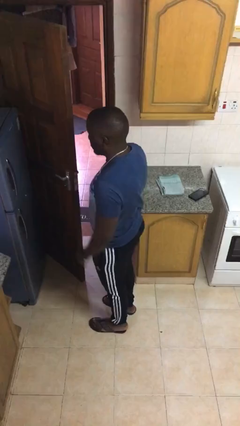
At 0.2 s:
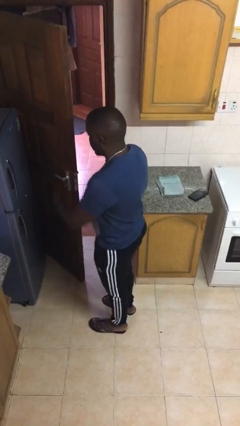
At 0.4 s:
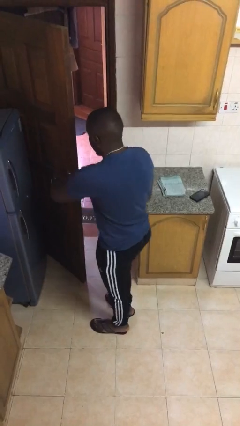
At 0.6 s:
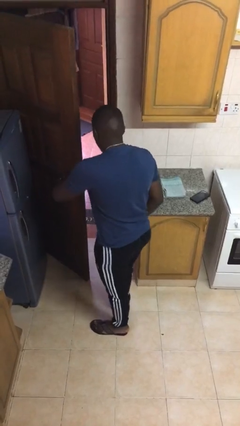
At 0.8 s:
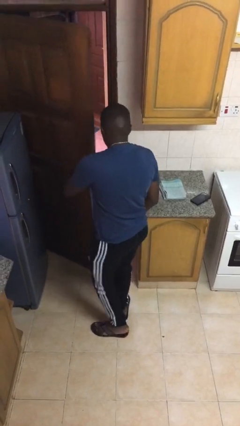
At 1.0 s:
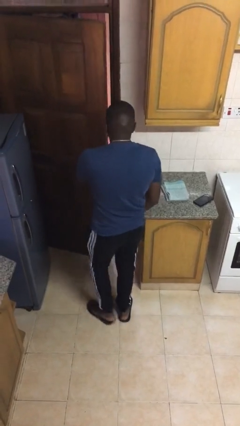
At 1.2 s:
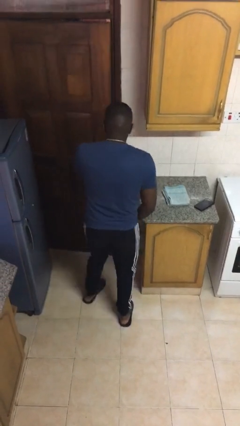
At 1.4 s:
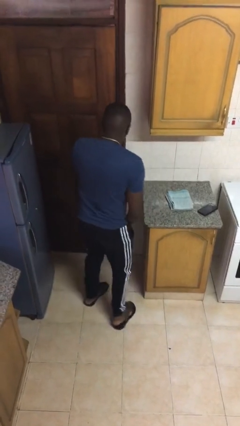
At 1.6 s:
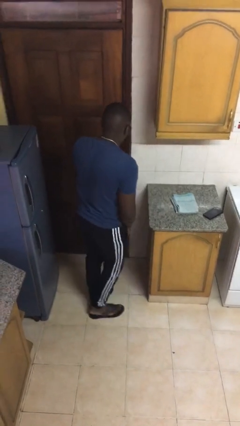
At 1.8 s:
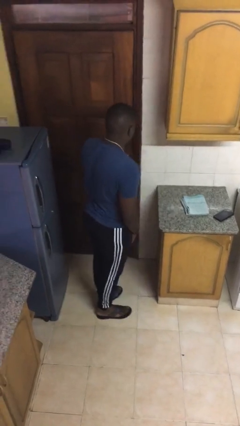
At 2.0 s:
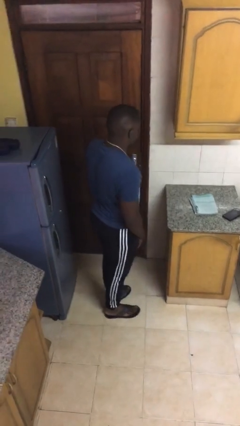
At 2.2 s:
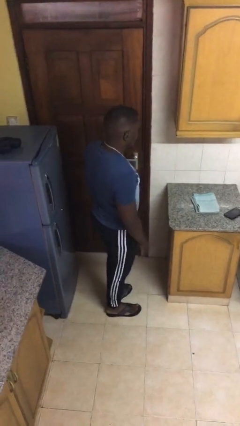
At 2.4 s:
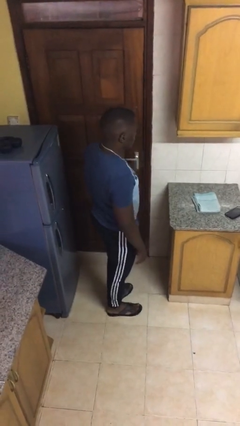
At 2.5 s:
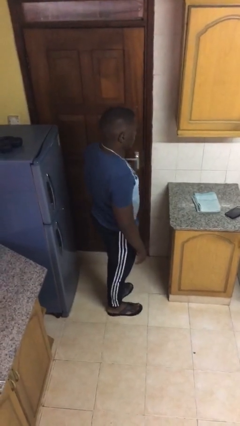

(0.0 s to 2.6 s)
person closes facility door

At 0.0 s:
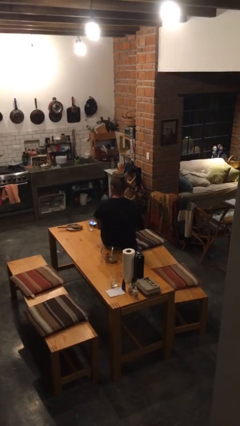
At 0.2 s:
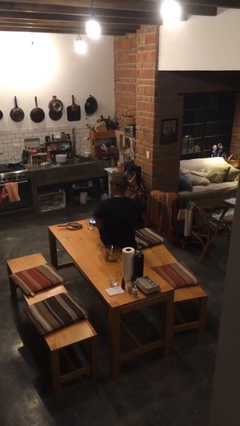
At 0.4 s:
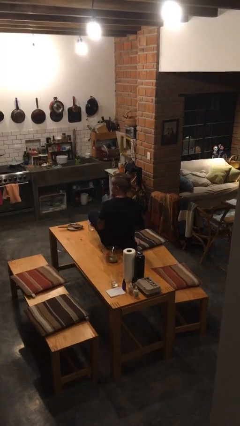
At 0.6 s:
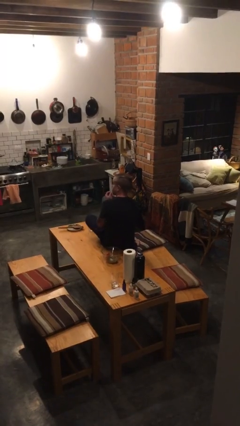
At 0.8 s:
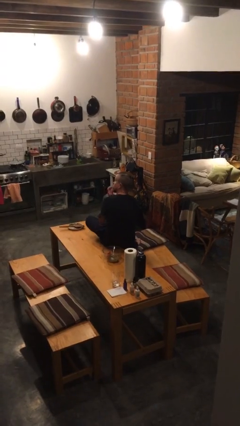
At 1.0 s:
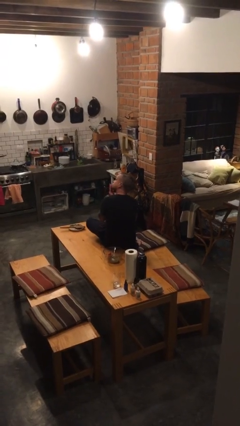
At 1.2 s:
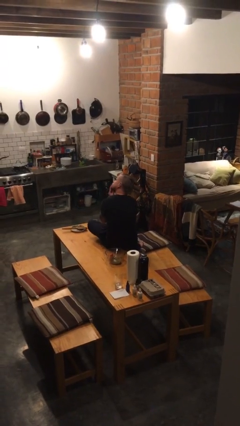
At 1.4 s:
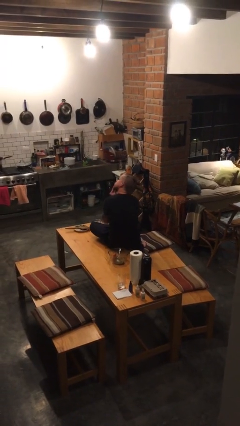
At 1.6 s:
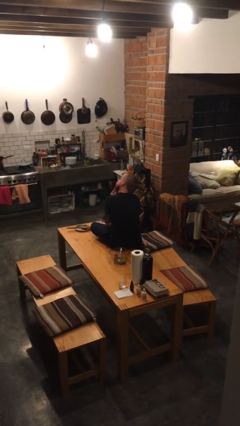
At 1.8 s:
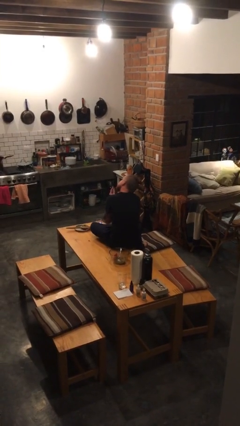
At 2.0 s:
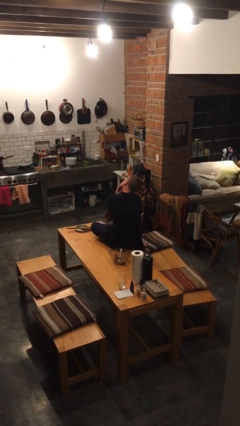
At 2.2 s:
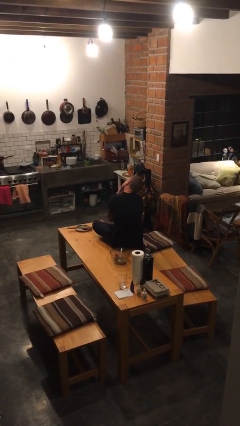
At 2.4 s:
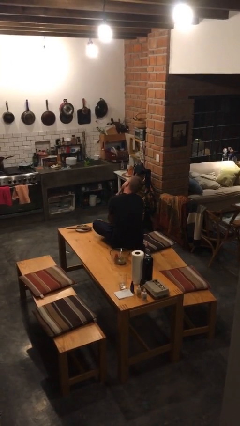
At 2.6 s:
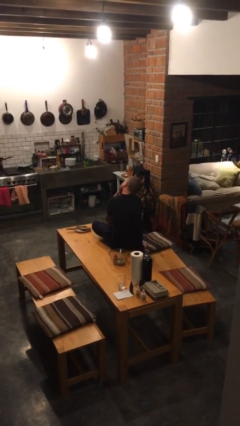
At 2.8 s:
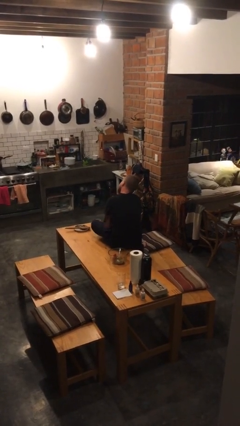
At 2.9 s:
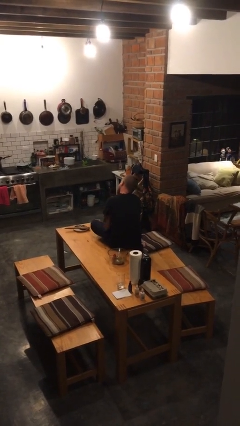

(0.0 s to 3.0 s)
person strokes chin

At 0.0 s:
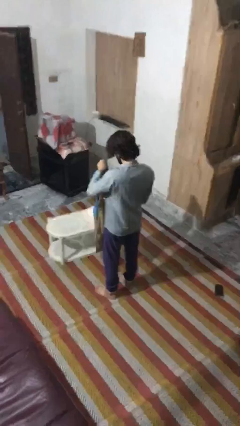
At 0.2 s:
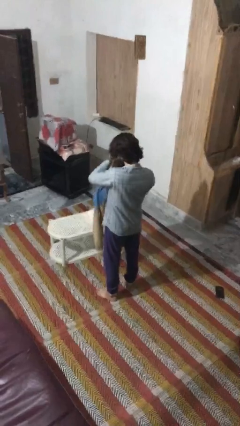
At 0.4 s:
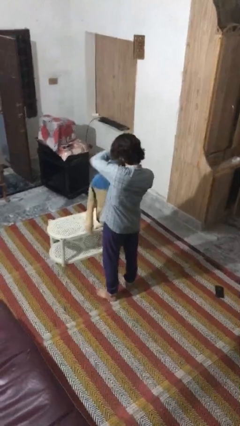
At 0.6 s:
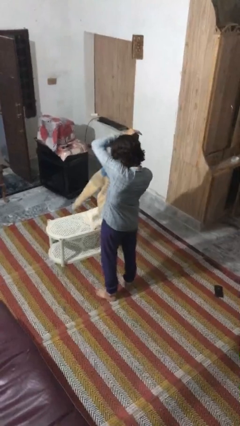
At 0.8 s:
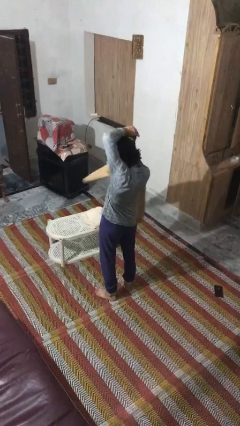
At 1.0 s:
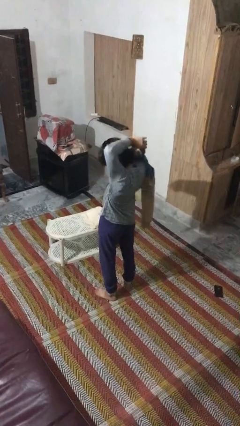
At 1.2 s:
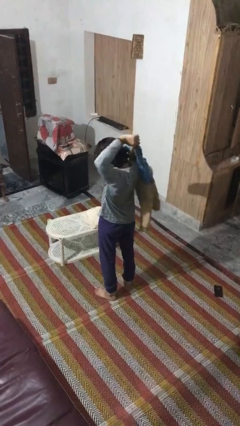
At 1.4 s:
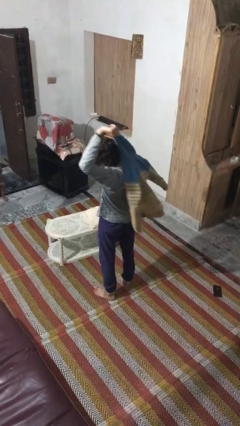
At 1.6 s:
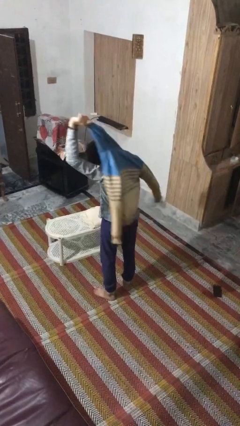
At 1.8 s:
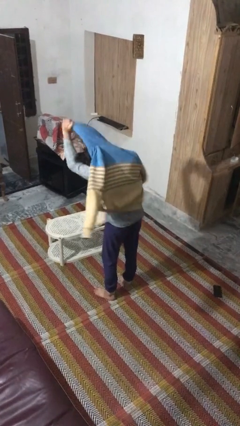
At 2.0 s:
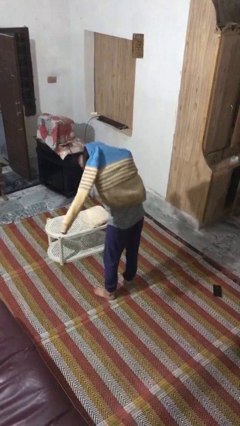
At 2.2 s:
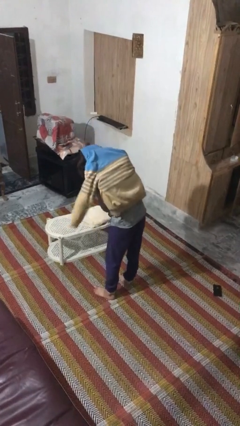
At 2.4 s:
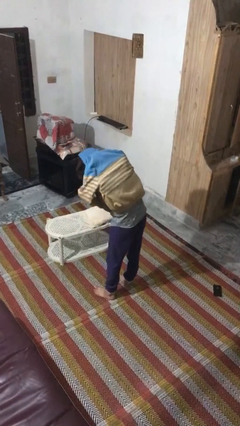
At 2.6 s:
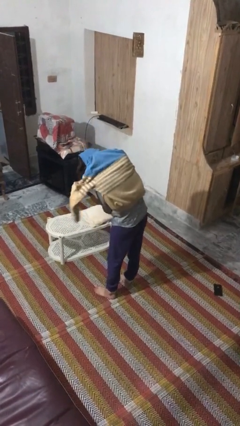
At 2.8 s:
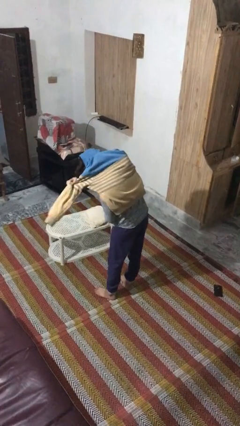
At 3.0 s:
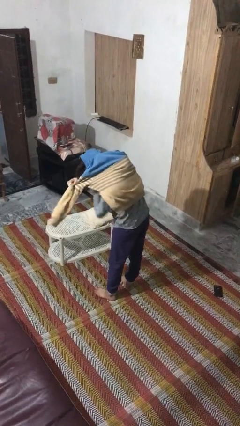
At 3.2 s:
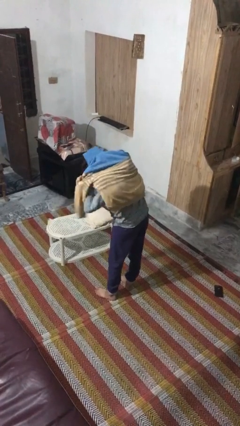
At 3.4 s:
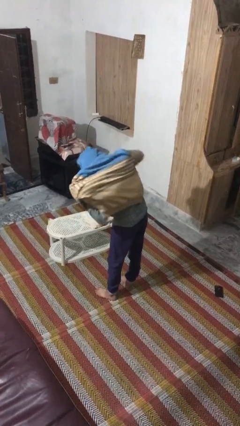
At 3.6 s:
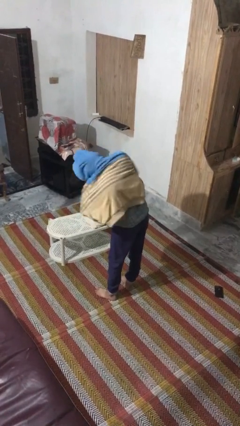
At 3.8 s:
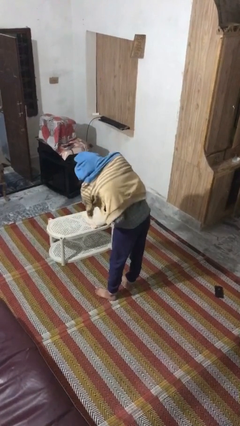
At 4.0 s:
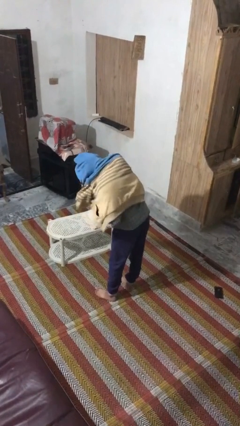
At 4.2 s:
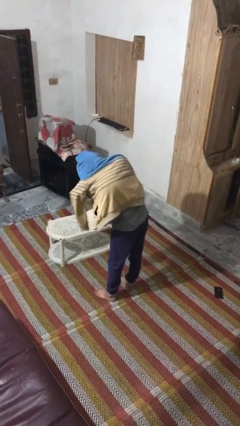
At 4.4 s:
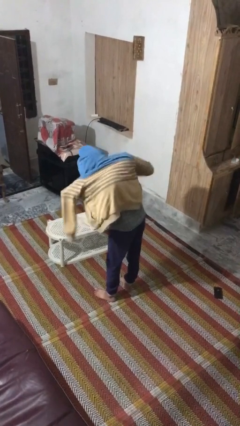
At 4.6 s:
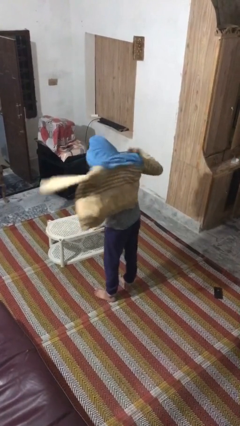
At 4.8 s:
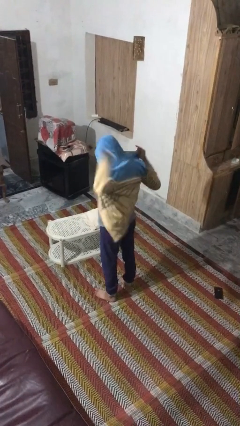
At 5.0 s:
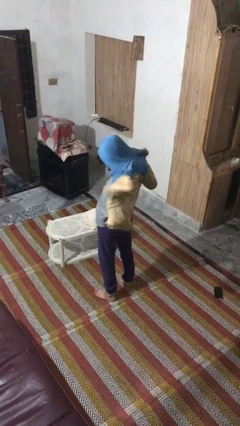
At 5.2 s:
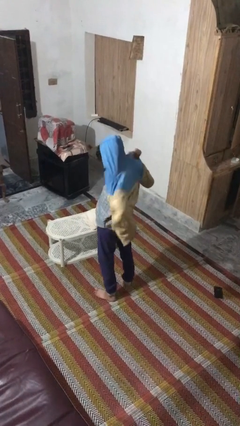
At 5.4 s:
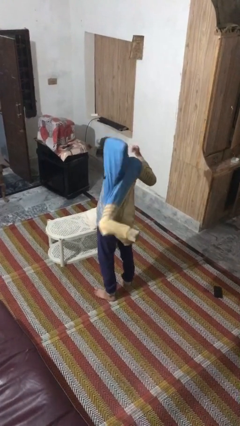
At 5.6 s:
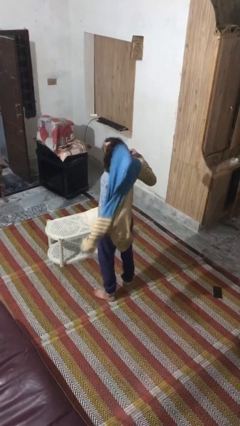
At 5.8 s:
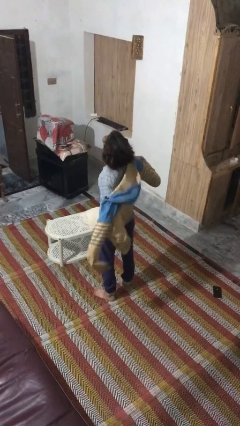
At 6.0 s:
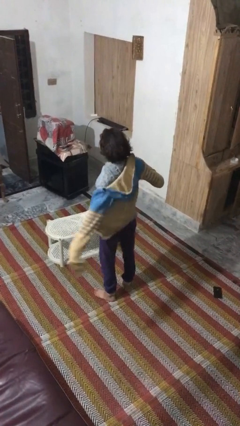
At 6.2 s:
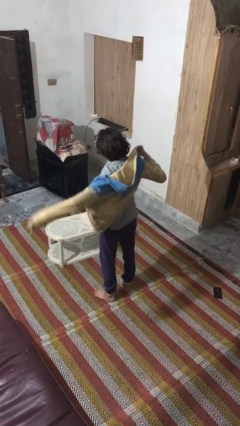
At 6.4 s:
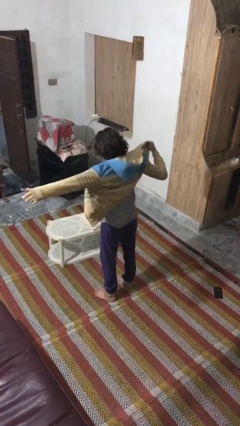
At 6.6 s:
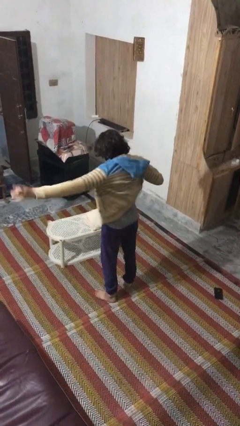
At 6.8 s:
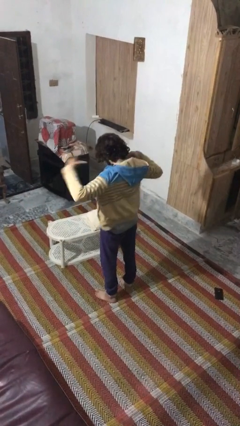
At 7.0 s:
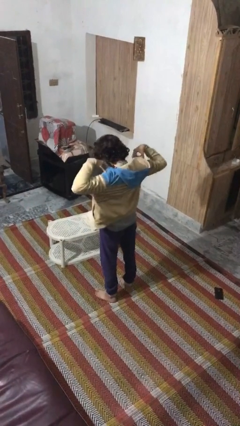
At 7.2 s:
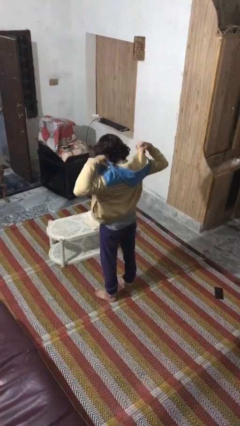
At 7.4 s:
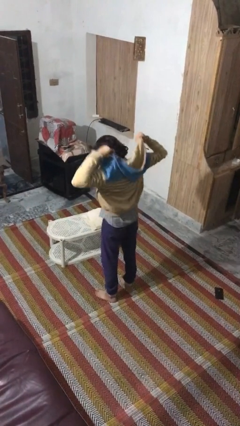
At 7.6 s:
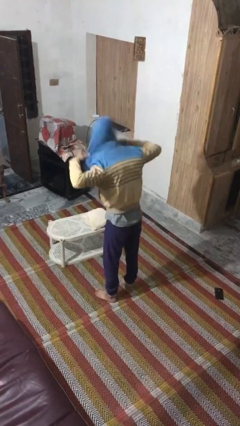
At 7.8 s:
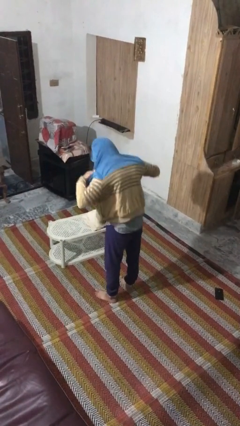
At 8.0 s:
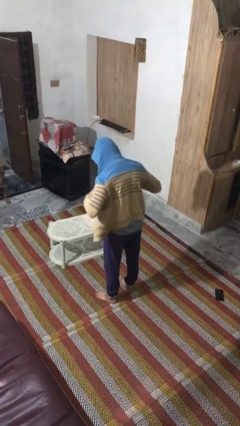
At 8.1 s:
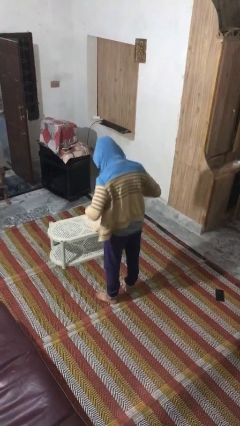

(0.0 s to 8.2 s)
person puts on hoodie

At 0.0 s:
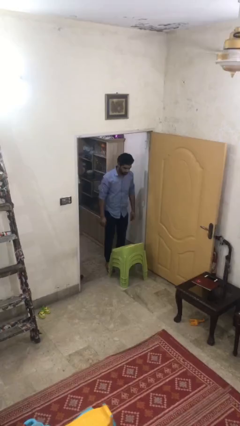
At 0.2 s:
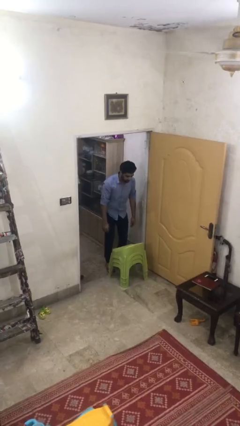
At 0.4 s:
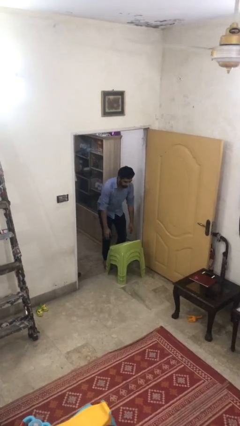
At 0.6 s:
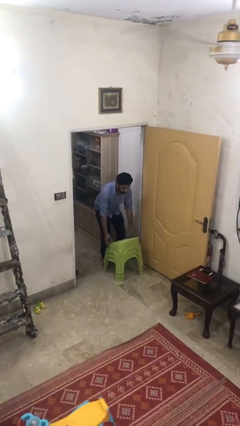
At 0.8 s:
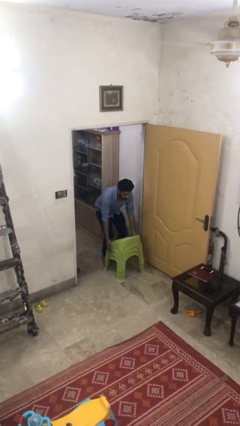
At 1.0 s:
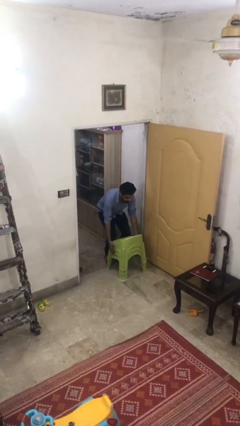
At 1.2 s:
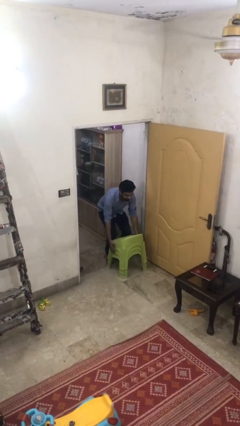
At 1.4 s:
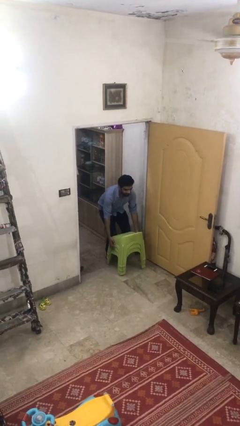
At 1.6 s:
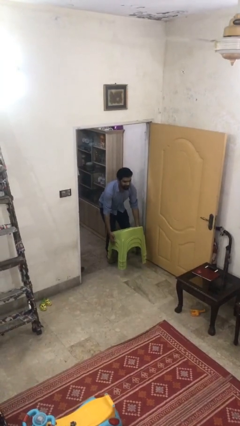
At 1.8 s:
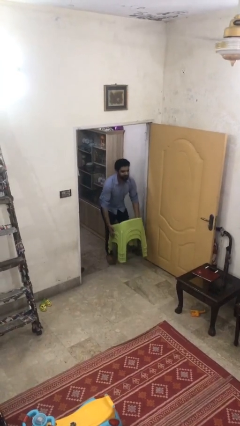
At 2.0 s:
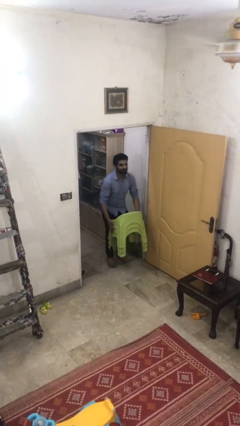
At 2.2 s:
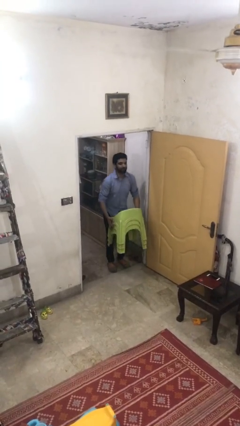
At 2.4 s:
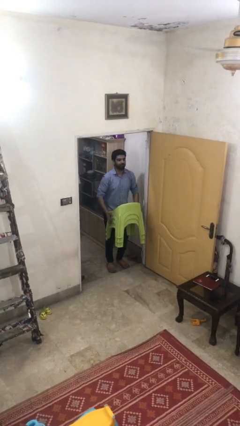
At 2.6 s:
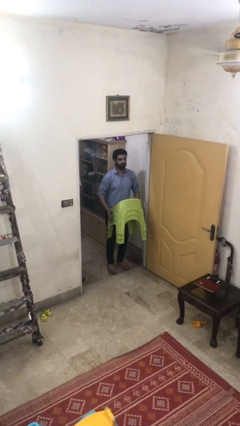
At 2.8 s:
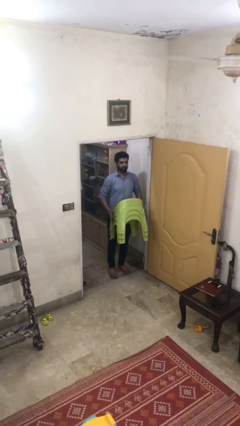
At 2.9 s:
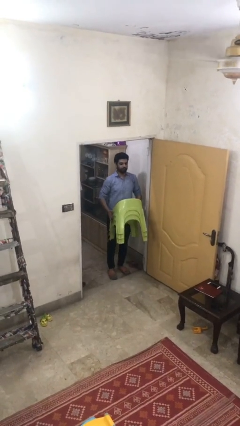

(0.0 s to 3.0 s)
person picks up object from floor

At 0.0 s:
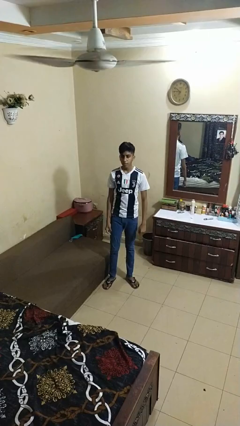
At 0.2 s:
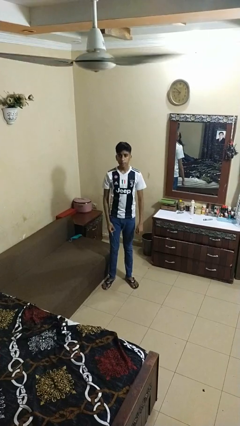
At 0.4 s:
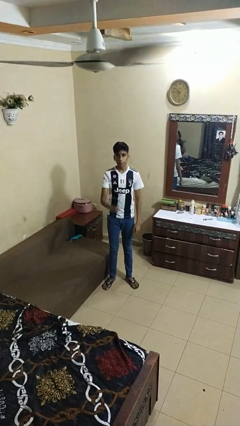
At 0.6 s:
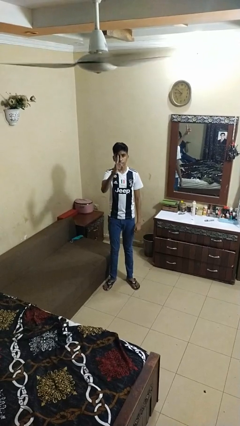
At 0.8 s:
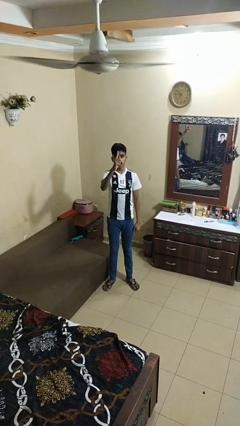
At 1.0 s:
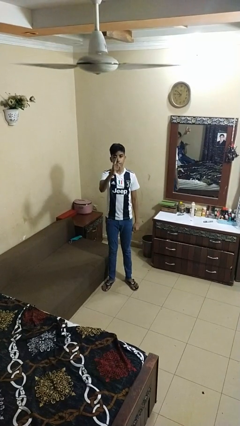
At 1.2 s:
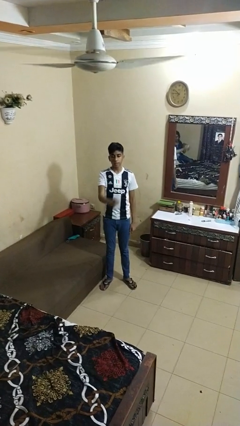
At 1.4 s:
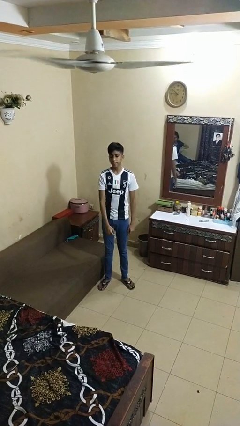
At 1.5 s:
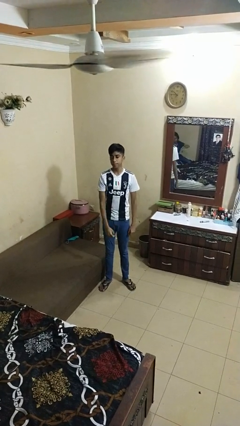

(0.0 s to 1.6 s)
person gestures number one
